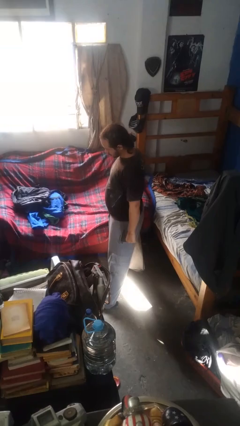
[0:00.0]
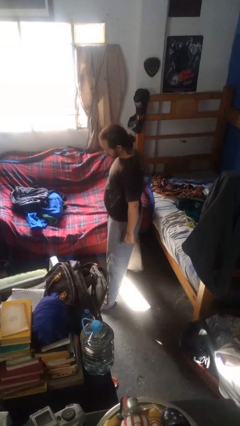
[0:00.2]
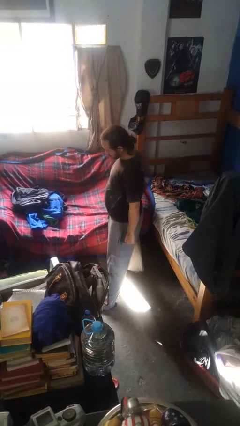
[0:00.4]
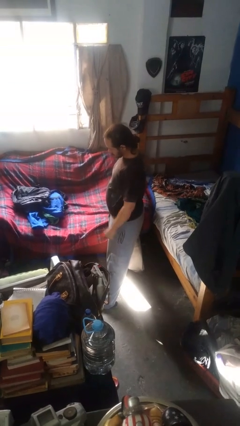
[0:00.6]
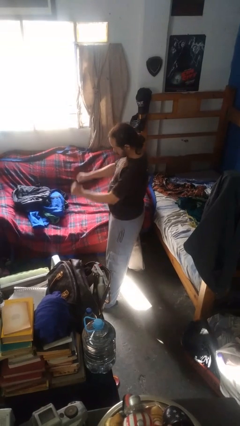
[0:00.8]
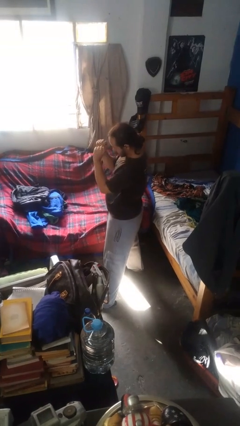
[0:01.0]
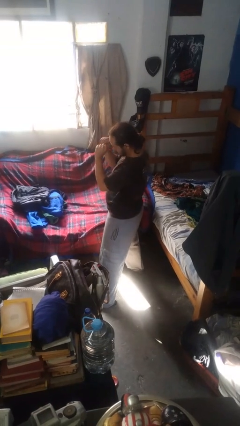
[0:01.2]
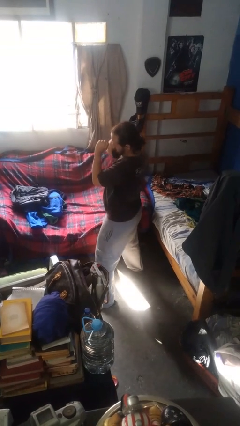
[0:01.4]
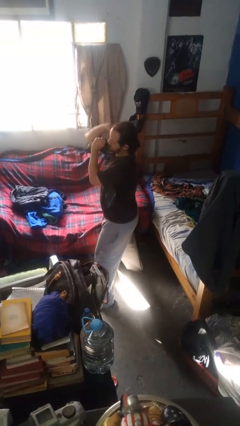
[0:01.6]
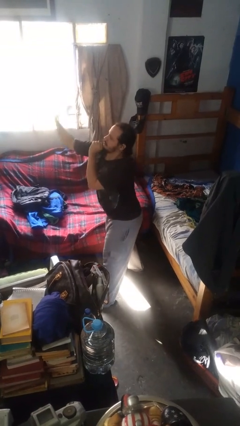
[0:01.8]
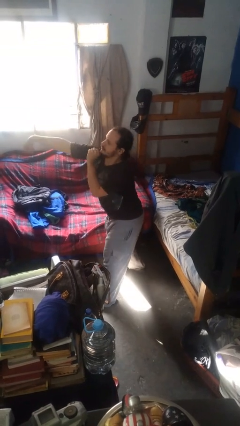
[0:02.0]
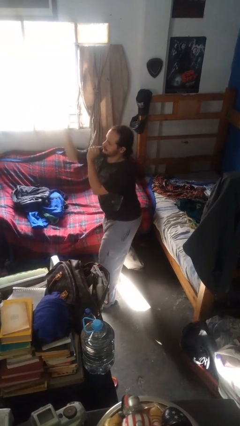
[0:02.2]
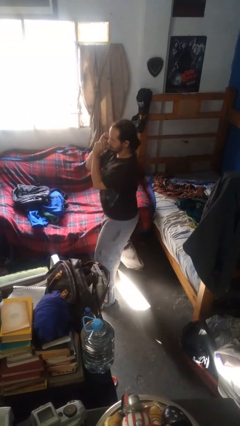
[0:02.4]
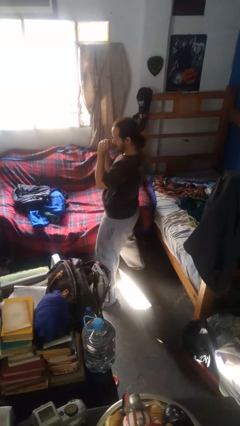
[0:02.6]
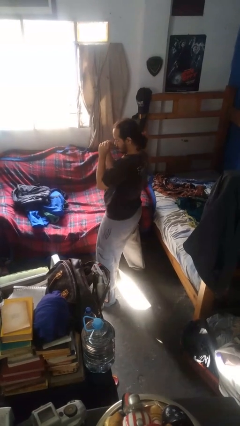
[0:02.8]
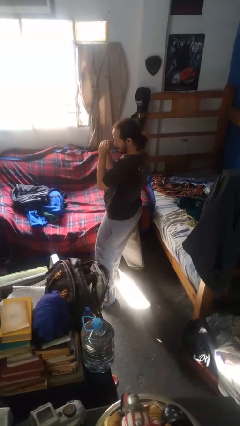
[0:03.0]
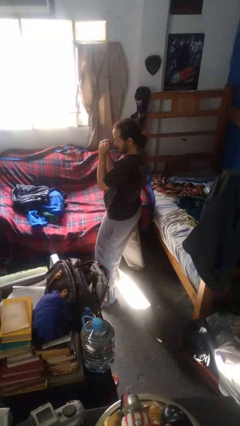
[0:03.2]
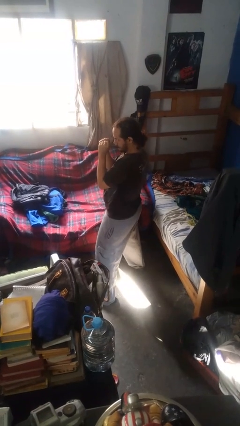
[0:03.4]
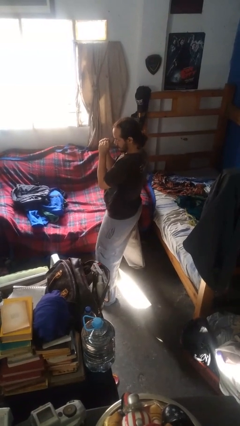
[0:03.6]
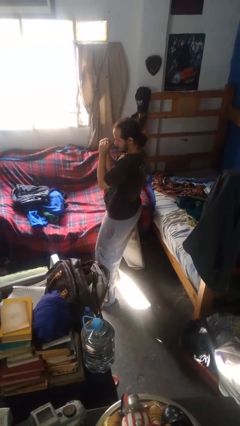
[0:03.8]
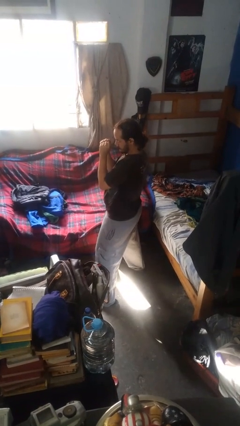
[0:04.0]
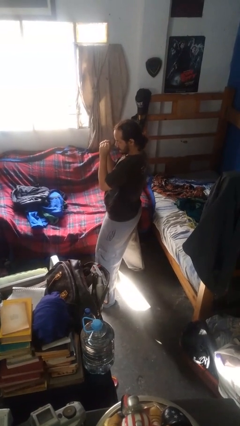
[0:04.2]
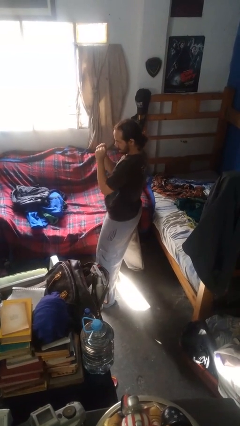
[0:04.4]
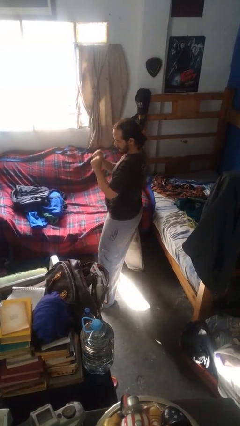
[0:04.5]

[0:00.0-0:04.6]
person punches

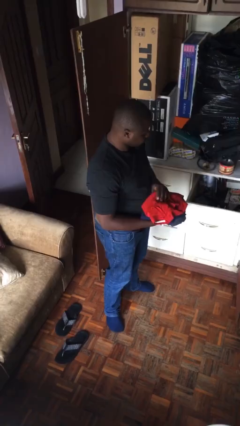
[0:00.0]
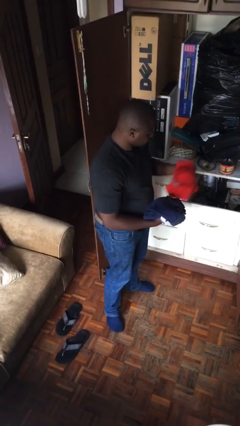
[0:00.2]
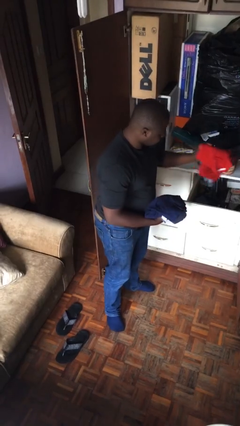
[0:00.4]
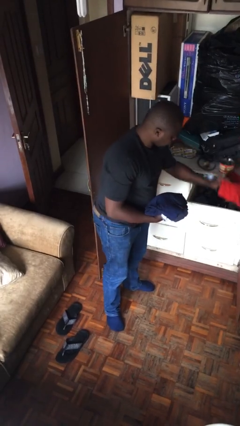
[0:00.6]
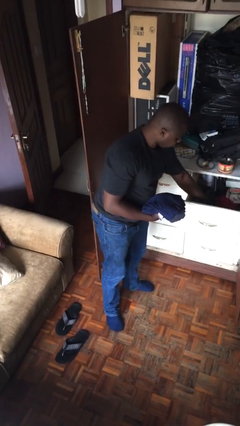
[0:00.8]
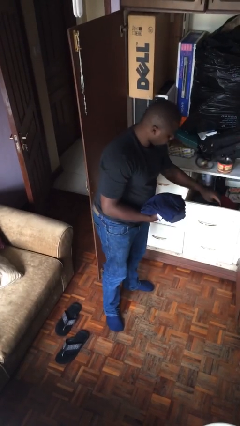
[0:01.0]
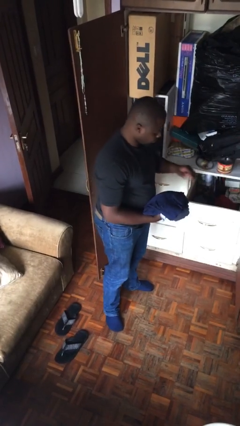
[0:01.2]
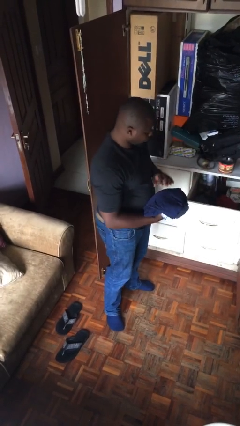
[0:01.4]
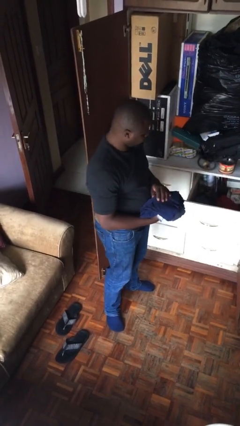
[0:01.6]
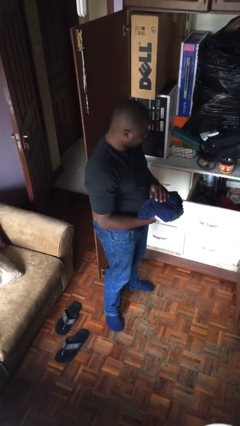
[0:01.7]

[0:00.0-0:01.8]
person puts clothes into dresser

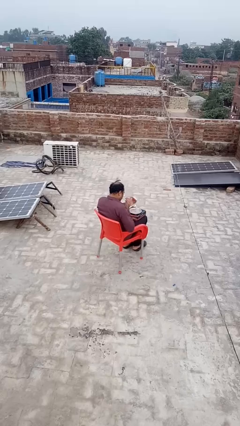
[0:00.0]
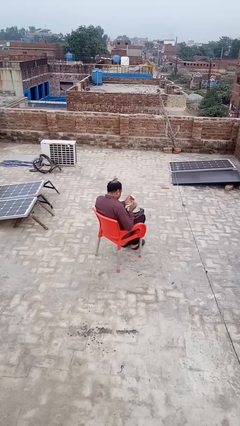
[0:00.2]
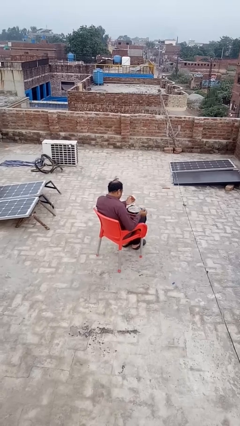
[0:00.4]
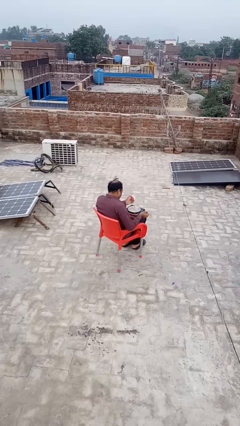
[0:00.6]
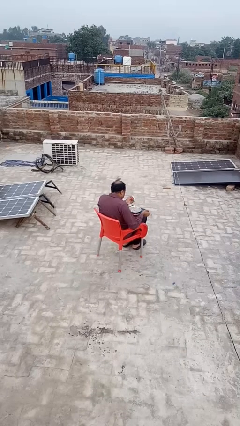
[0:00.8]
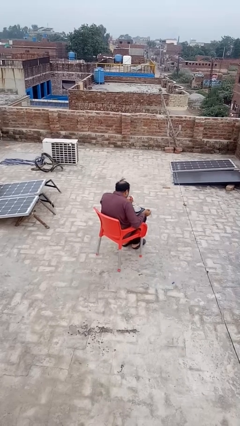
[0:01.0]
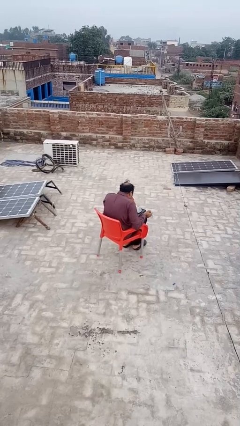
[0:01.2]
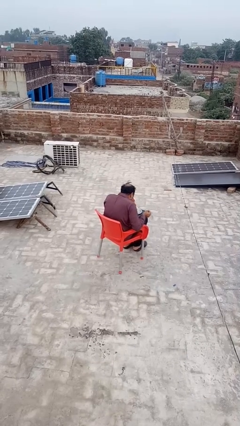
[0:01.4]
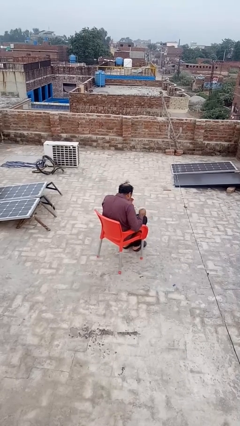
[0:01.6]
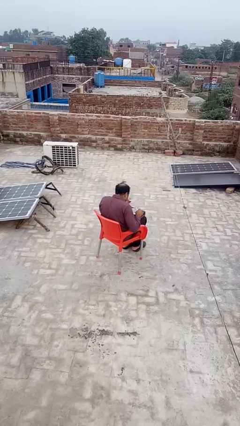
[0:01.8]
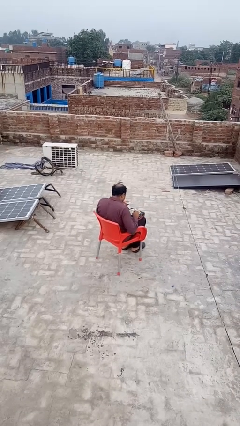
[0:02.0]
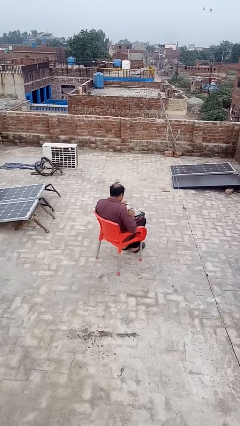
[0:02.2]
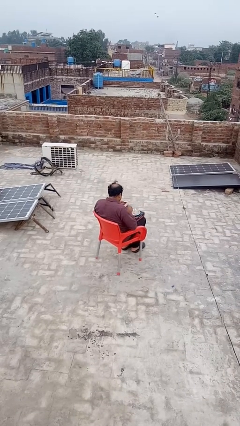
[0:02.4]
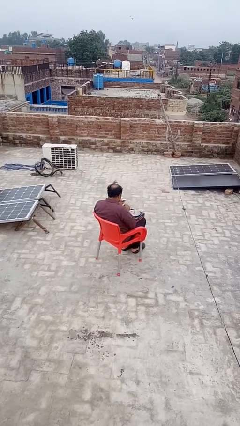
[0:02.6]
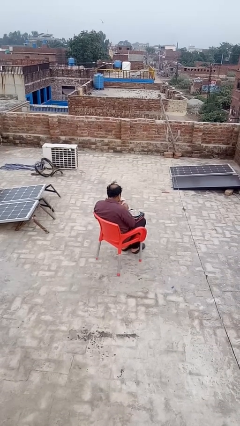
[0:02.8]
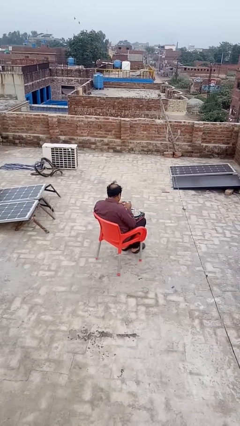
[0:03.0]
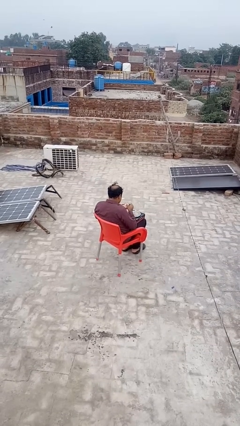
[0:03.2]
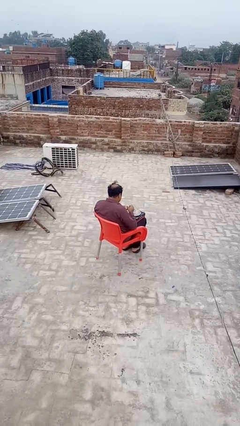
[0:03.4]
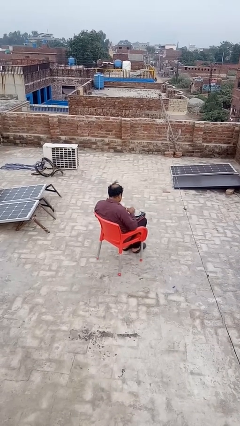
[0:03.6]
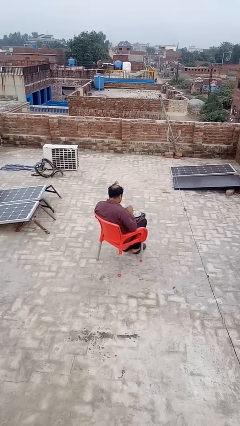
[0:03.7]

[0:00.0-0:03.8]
person extinguishes candle

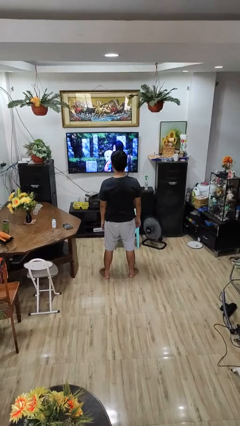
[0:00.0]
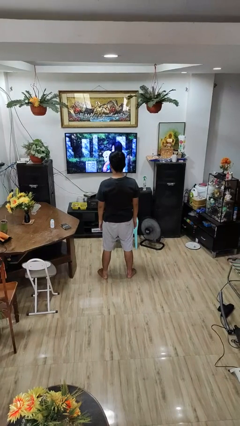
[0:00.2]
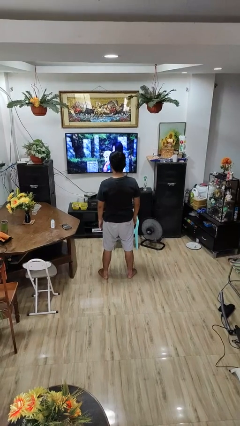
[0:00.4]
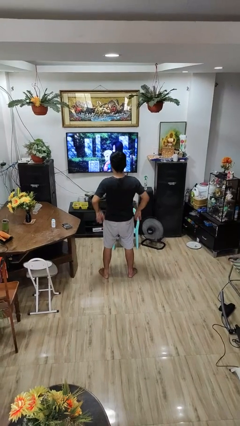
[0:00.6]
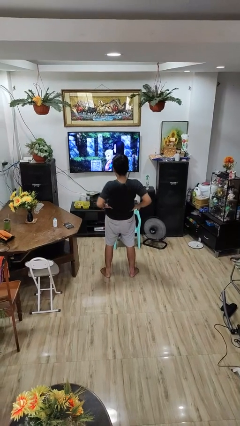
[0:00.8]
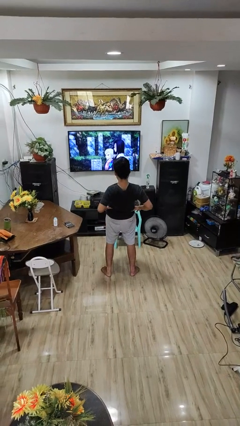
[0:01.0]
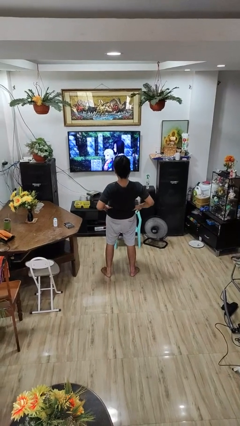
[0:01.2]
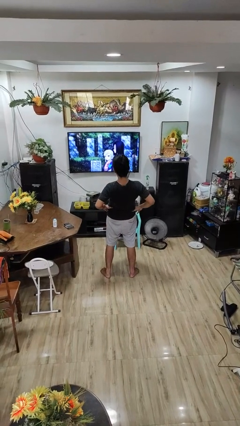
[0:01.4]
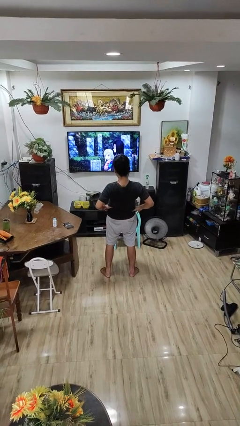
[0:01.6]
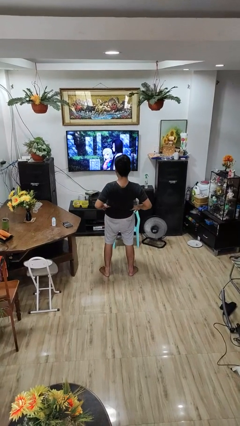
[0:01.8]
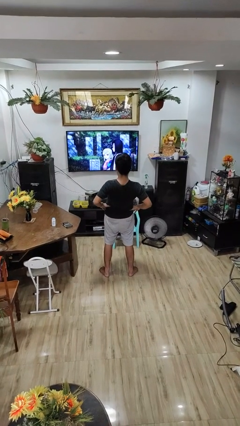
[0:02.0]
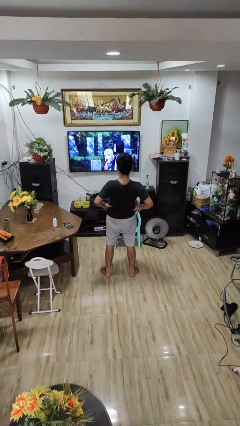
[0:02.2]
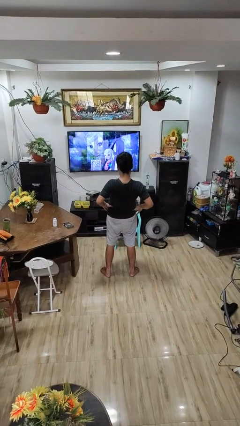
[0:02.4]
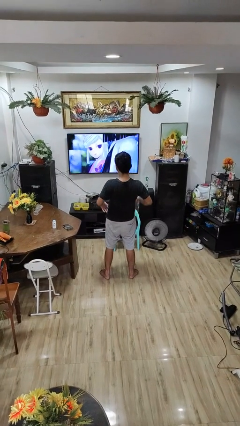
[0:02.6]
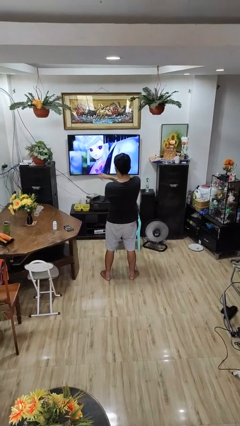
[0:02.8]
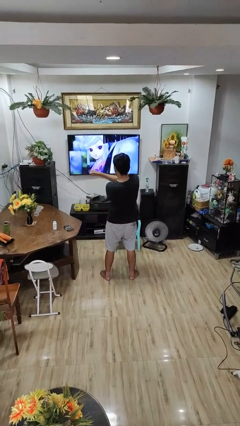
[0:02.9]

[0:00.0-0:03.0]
person stretches back

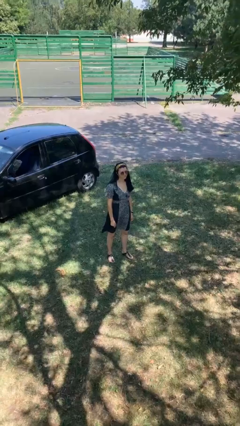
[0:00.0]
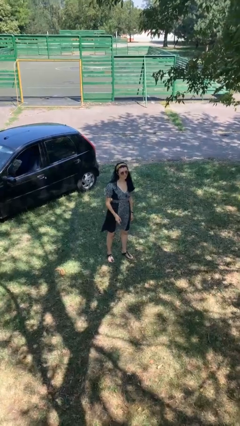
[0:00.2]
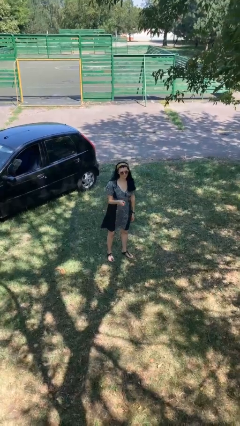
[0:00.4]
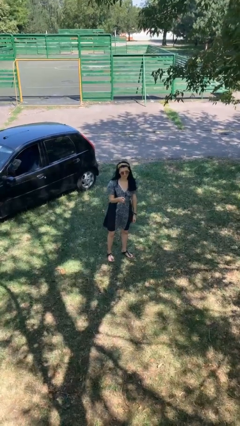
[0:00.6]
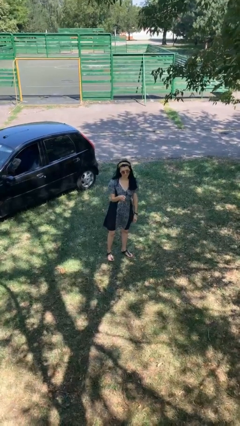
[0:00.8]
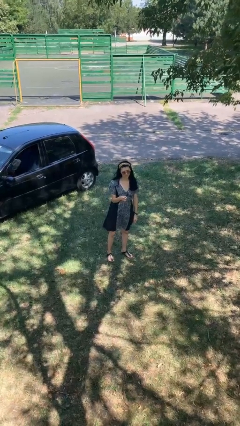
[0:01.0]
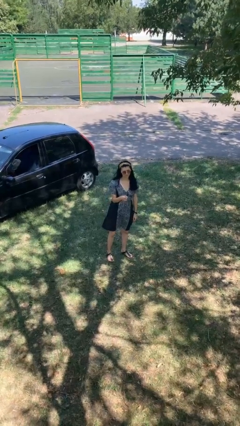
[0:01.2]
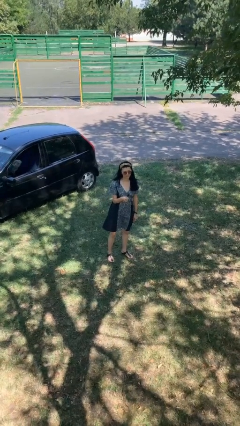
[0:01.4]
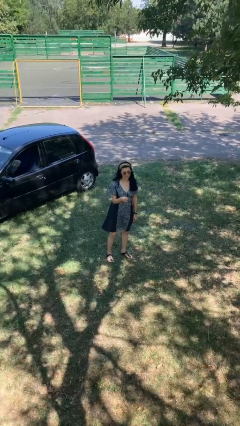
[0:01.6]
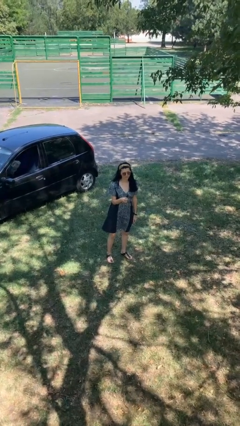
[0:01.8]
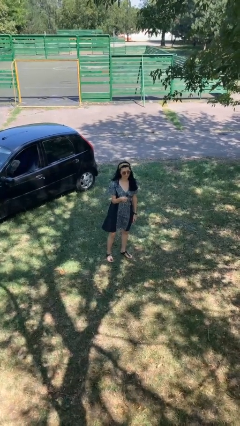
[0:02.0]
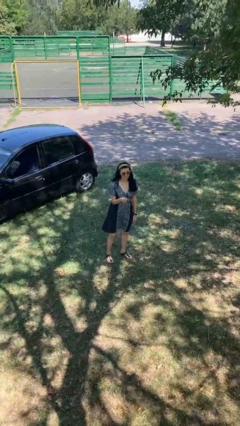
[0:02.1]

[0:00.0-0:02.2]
person points at person

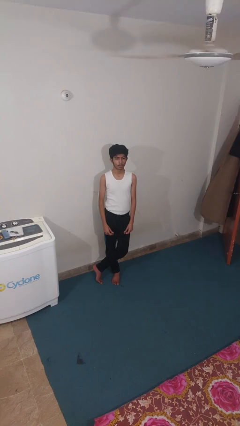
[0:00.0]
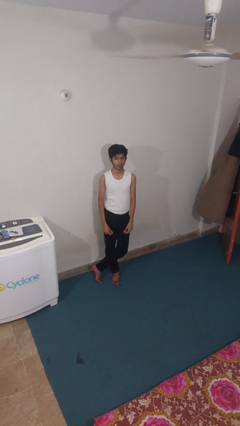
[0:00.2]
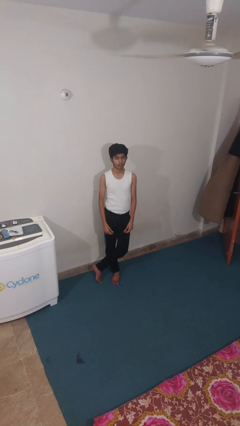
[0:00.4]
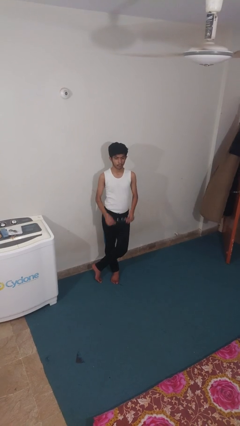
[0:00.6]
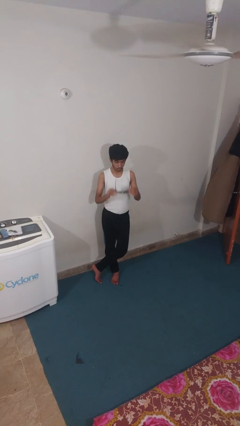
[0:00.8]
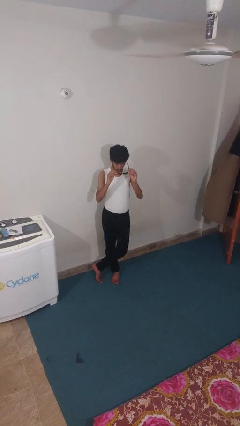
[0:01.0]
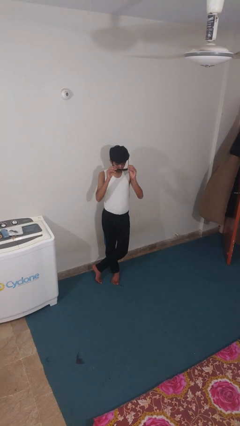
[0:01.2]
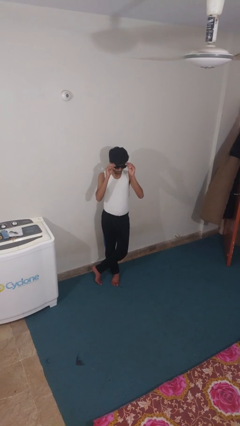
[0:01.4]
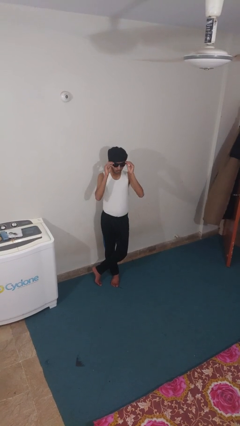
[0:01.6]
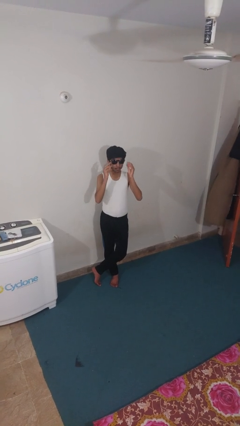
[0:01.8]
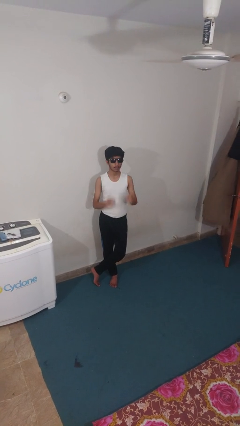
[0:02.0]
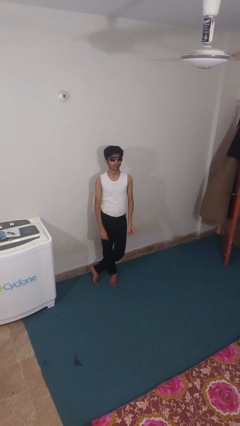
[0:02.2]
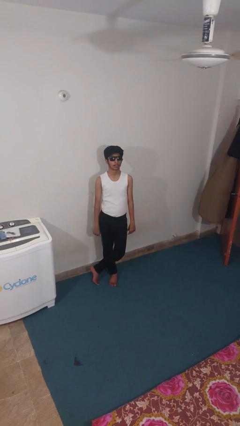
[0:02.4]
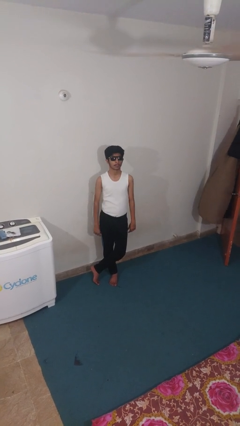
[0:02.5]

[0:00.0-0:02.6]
person puts on sunglasses
